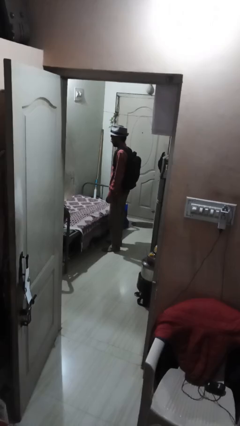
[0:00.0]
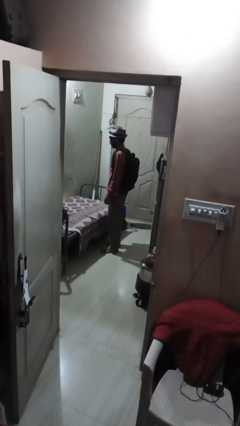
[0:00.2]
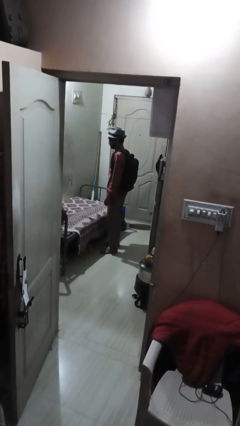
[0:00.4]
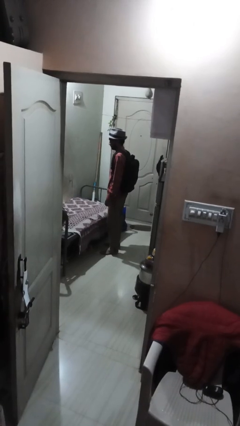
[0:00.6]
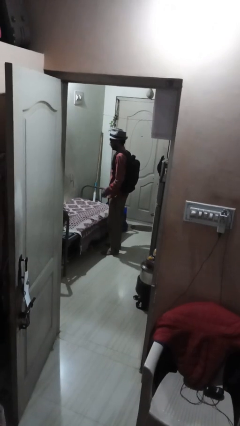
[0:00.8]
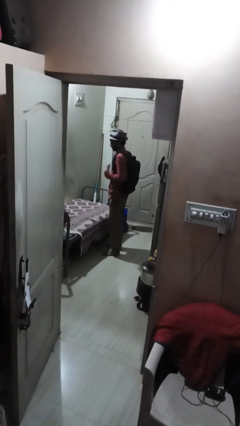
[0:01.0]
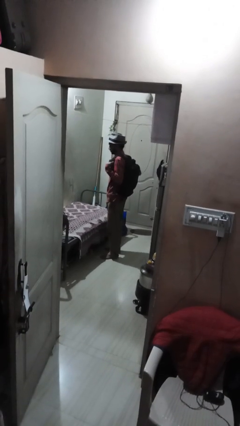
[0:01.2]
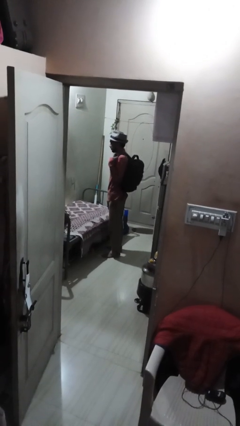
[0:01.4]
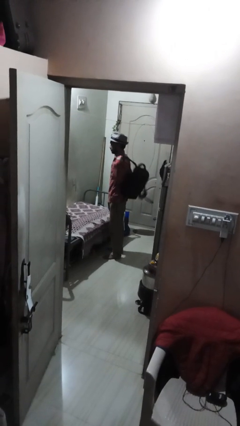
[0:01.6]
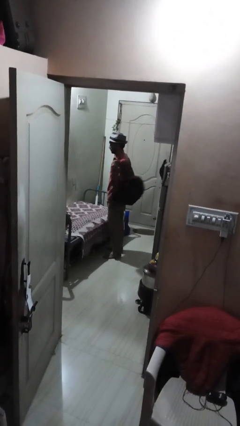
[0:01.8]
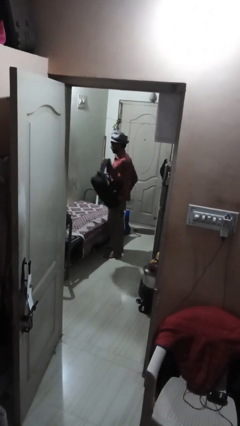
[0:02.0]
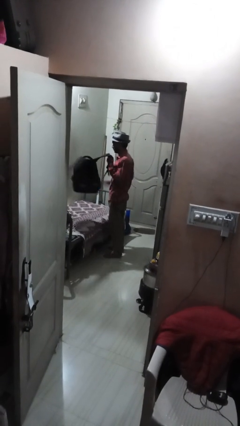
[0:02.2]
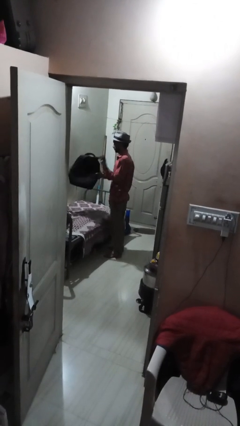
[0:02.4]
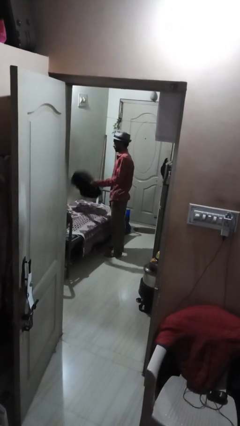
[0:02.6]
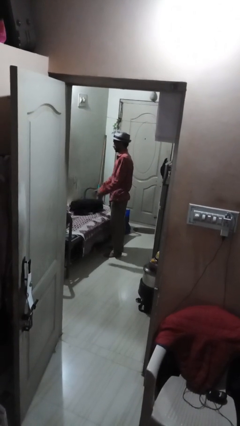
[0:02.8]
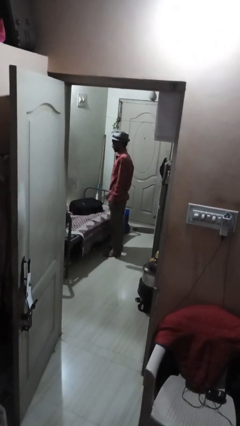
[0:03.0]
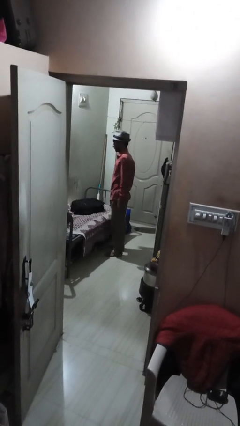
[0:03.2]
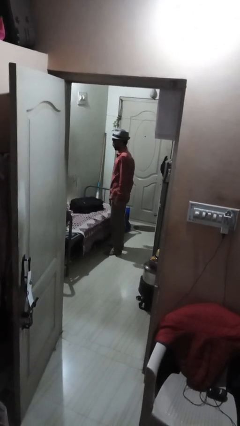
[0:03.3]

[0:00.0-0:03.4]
person takes off backpack

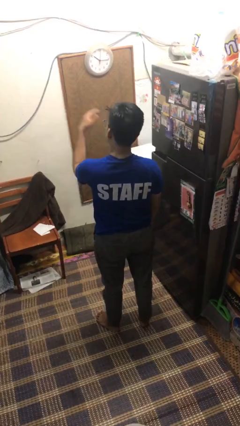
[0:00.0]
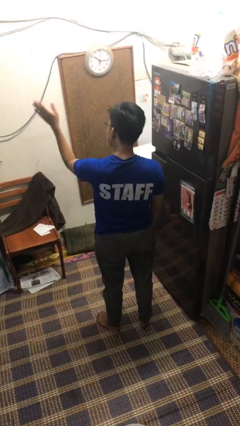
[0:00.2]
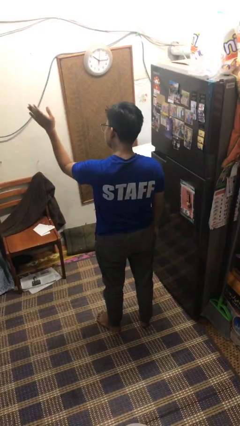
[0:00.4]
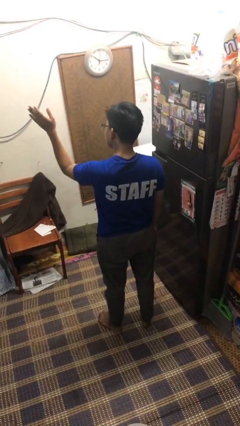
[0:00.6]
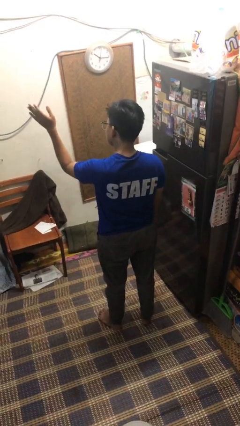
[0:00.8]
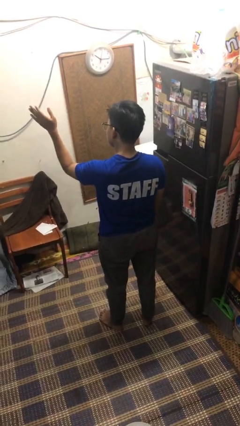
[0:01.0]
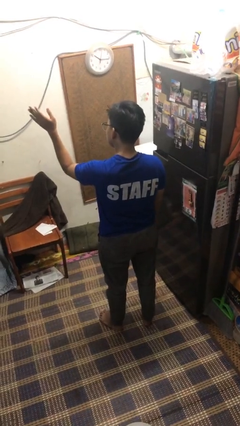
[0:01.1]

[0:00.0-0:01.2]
person gestures swipe left

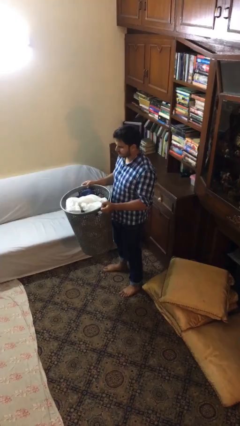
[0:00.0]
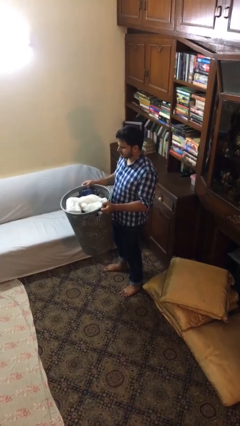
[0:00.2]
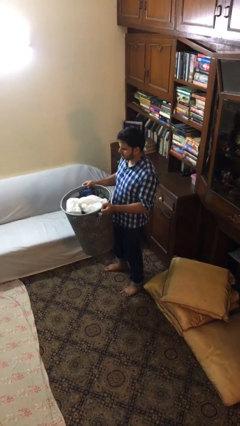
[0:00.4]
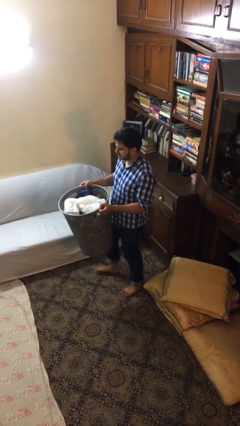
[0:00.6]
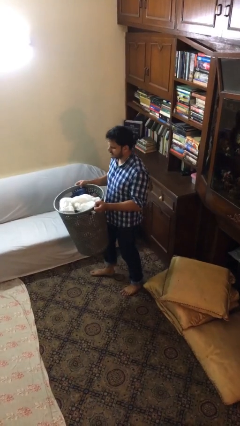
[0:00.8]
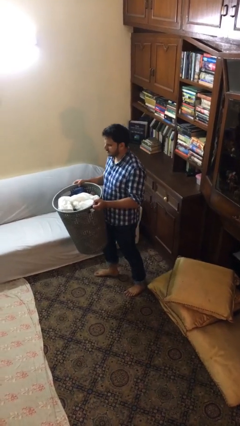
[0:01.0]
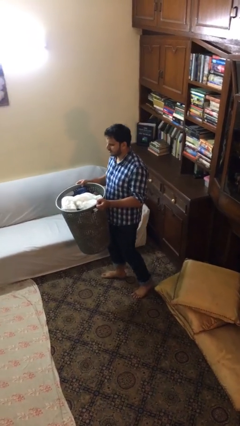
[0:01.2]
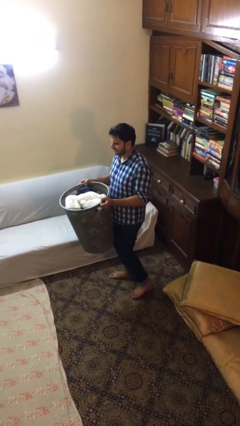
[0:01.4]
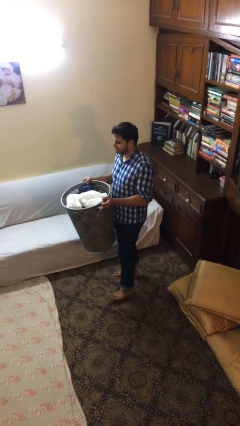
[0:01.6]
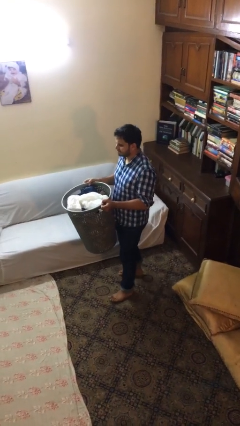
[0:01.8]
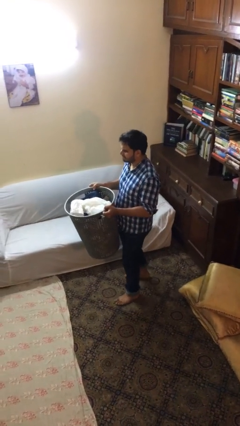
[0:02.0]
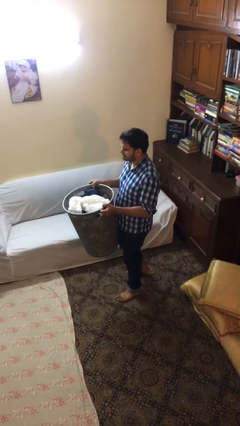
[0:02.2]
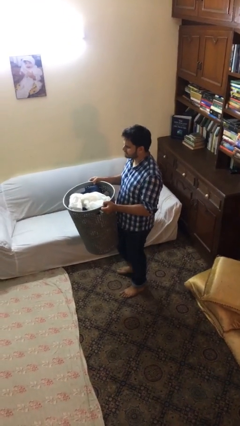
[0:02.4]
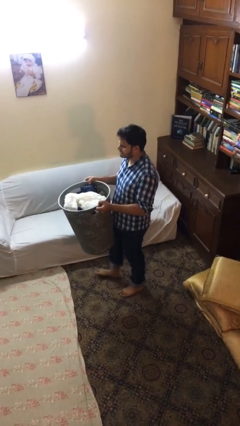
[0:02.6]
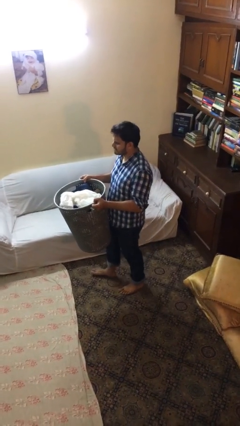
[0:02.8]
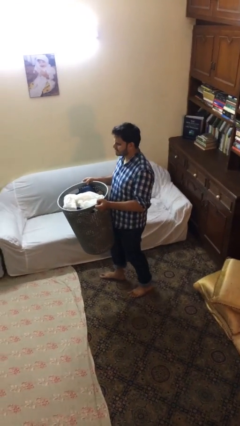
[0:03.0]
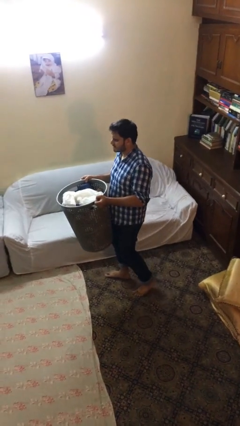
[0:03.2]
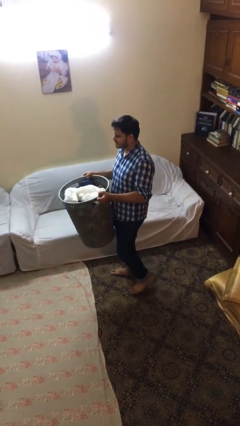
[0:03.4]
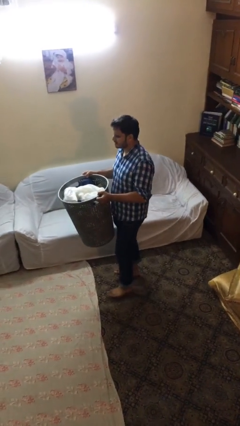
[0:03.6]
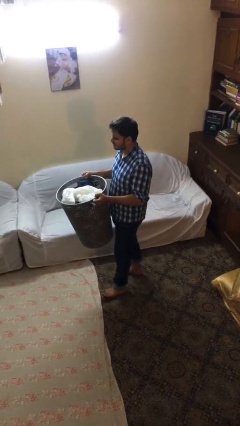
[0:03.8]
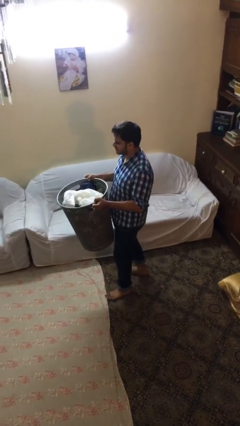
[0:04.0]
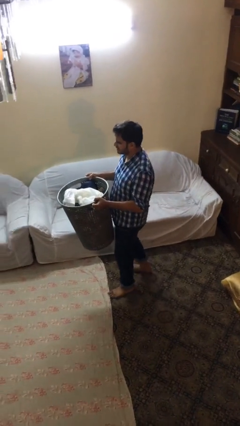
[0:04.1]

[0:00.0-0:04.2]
person carries heavy object

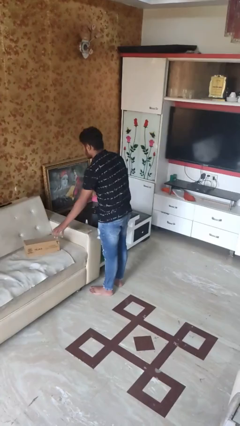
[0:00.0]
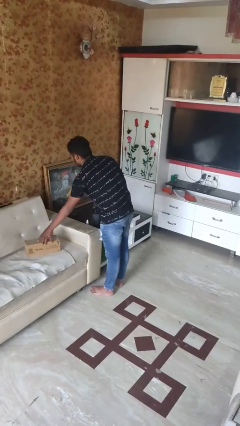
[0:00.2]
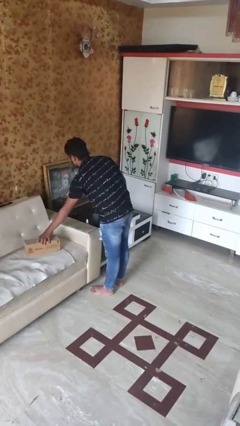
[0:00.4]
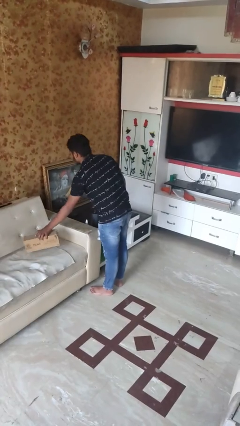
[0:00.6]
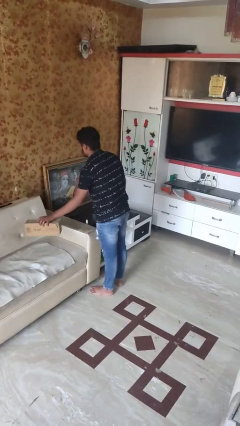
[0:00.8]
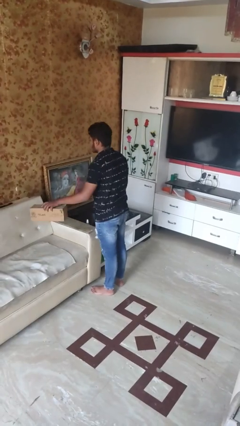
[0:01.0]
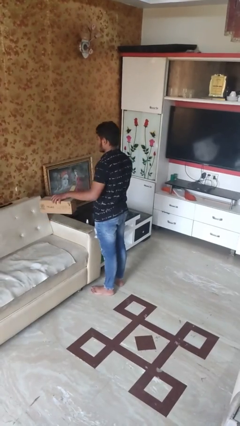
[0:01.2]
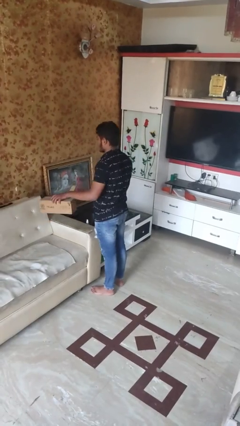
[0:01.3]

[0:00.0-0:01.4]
person picks up object from couch

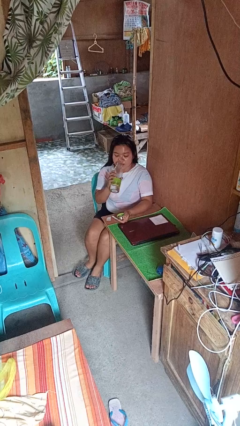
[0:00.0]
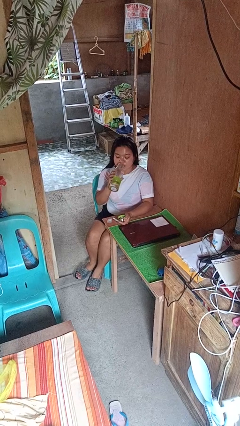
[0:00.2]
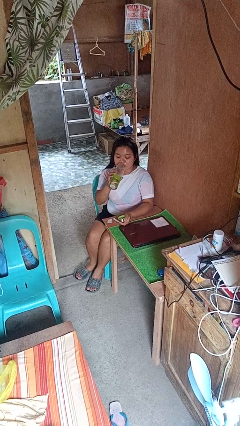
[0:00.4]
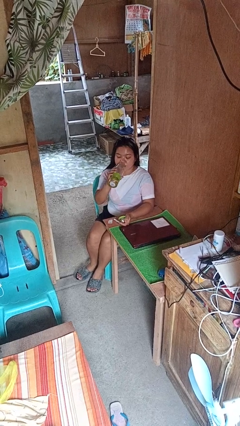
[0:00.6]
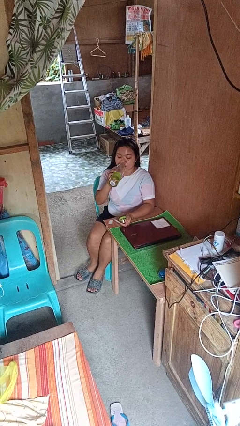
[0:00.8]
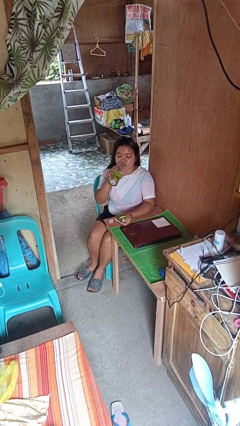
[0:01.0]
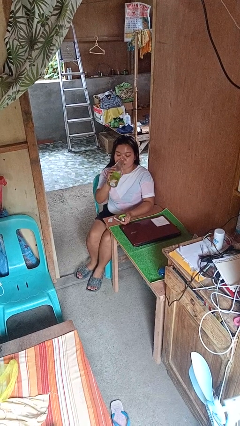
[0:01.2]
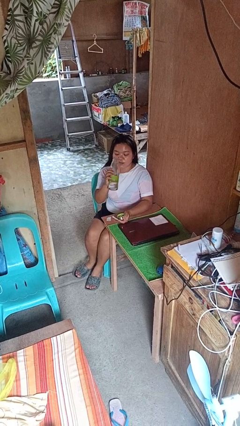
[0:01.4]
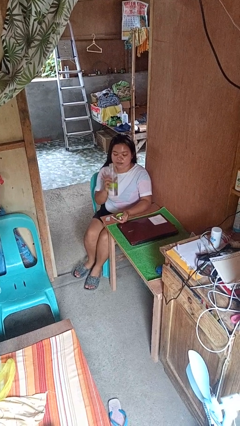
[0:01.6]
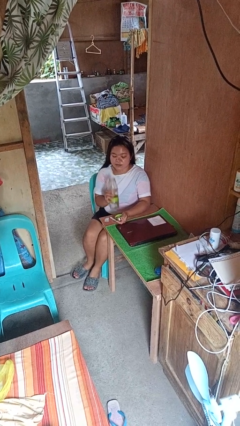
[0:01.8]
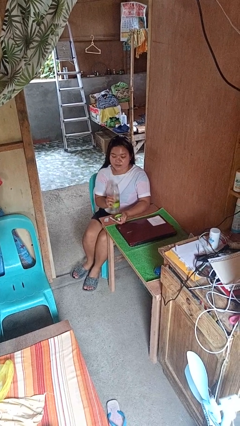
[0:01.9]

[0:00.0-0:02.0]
person drinks from bottle

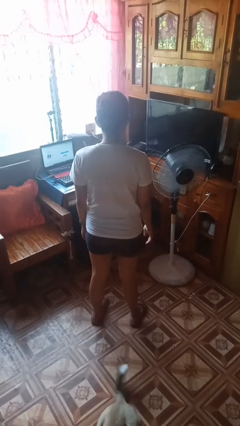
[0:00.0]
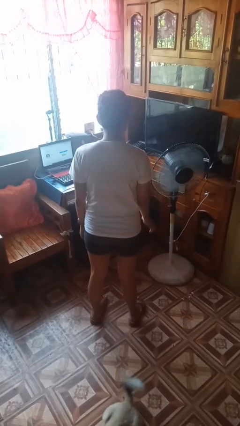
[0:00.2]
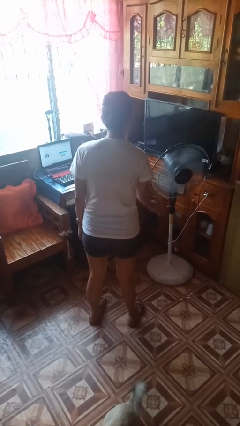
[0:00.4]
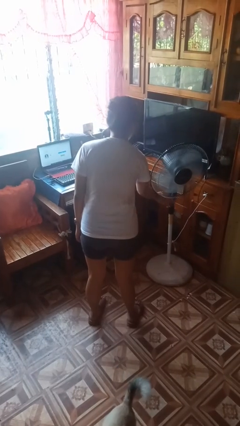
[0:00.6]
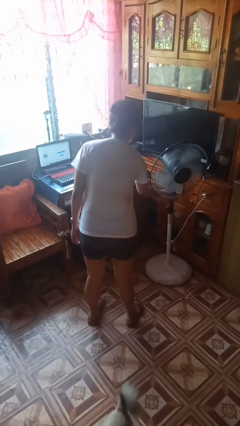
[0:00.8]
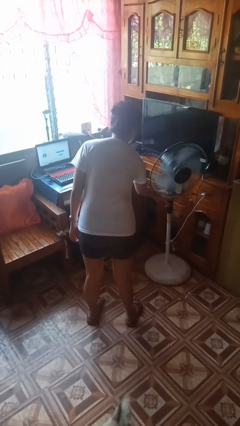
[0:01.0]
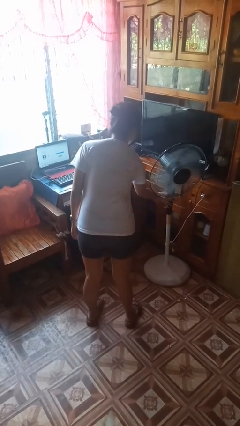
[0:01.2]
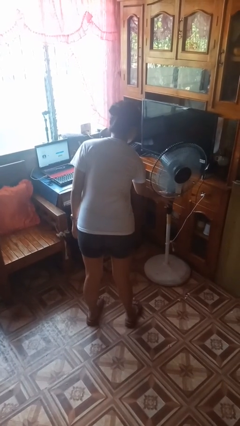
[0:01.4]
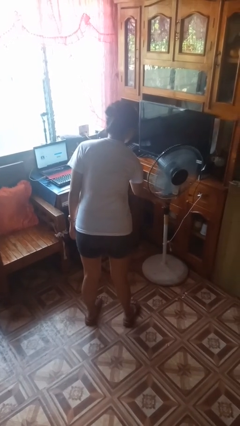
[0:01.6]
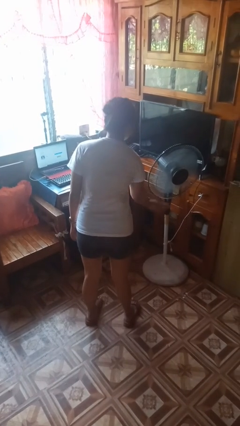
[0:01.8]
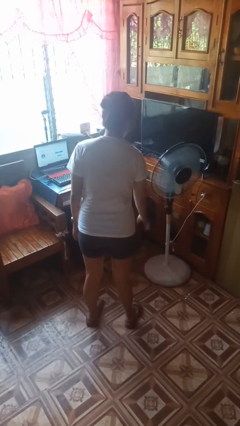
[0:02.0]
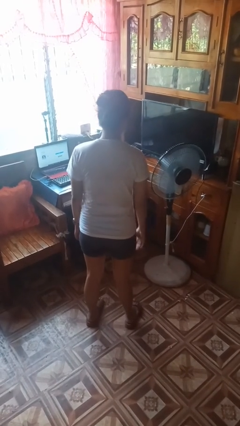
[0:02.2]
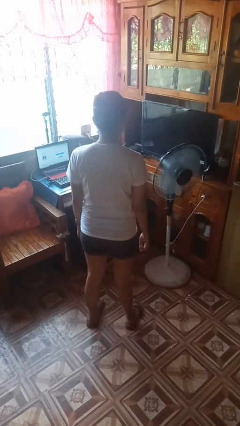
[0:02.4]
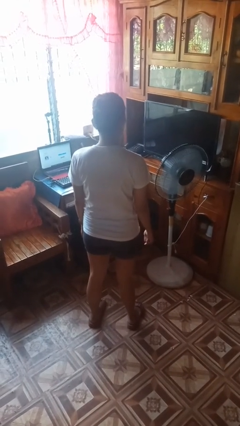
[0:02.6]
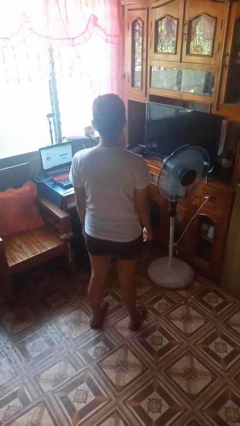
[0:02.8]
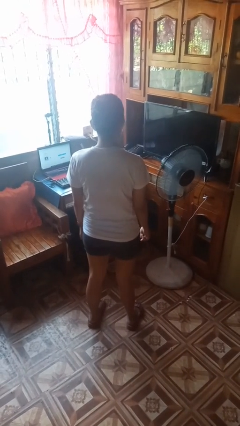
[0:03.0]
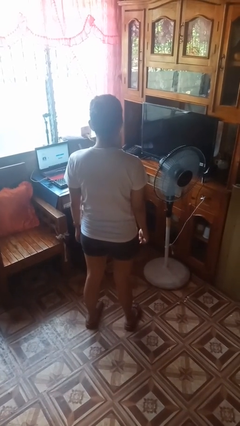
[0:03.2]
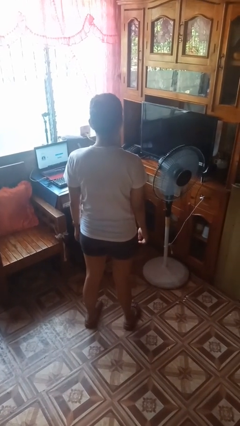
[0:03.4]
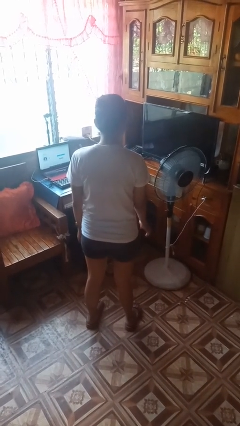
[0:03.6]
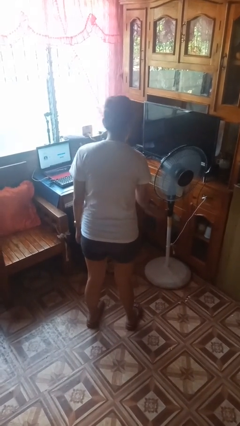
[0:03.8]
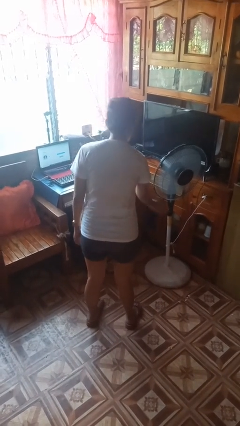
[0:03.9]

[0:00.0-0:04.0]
person turns on fan

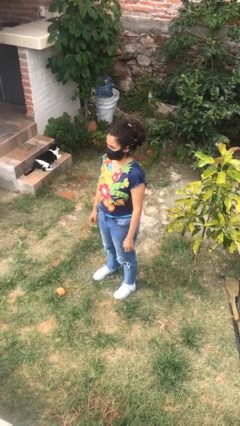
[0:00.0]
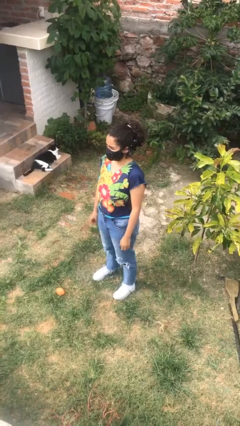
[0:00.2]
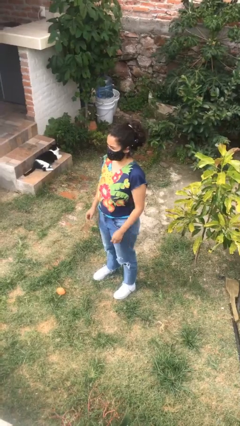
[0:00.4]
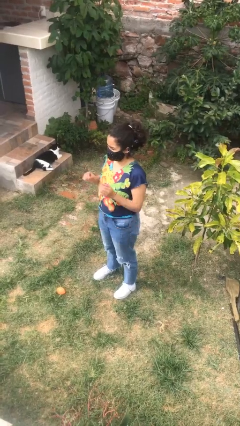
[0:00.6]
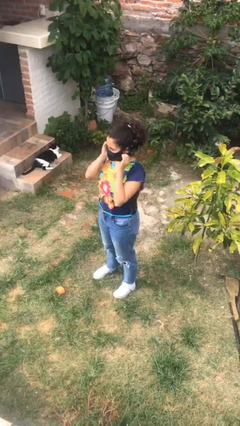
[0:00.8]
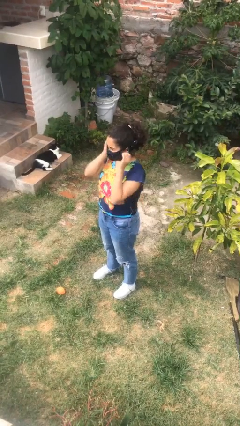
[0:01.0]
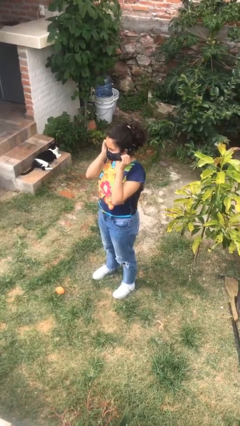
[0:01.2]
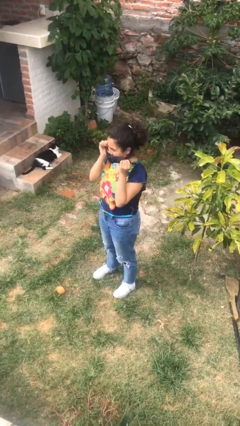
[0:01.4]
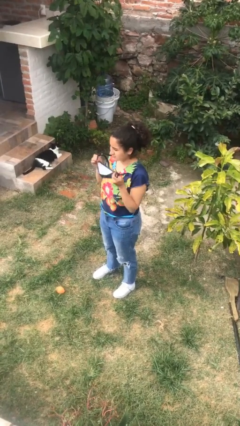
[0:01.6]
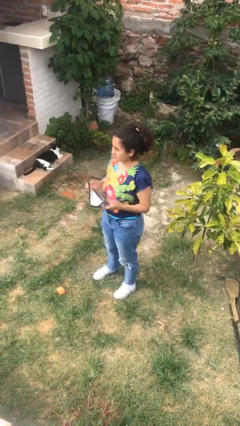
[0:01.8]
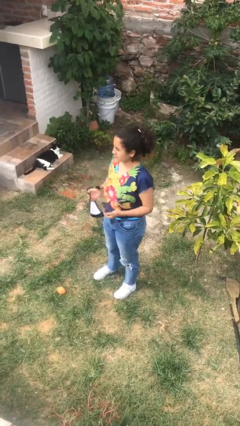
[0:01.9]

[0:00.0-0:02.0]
person takes off facemask
